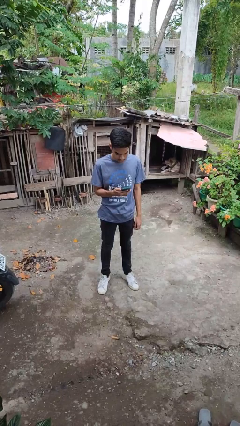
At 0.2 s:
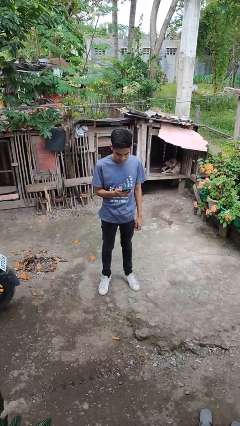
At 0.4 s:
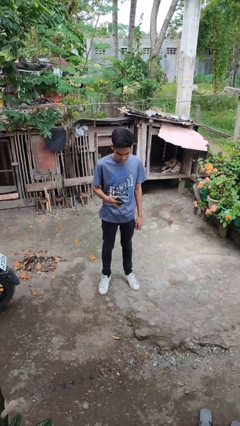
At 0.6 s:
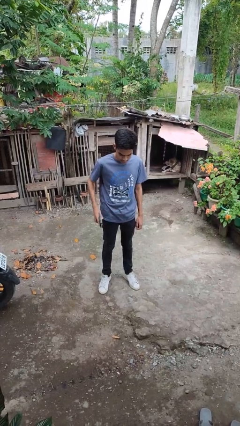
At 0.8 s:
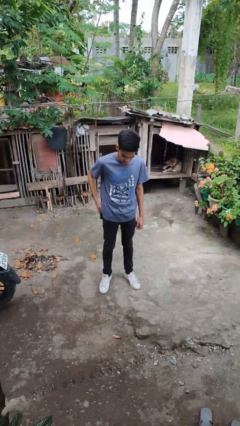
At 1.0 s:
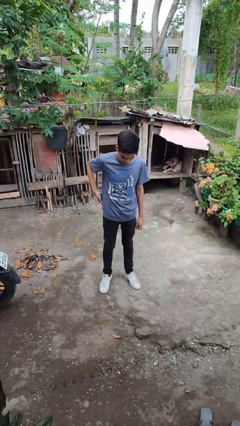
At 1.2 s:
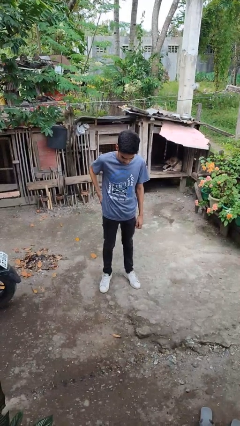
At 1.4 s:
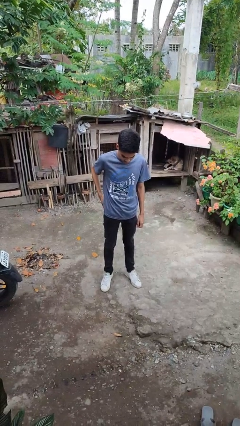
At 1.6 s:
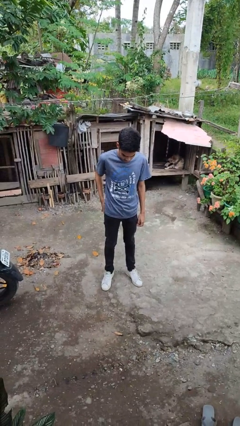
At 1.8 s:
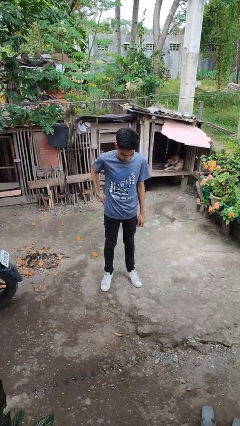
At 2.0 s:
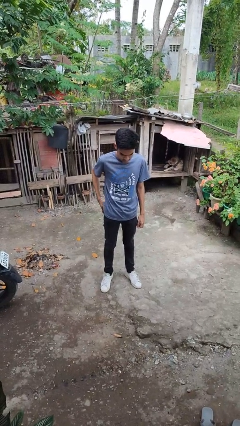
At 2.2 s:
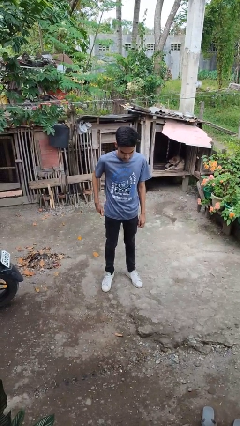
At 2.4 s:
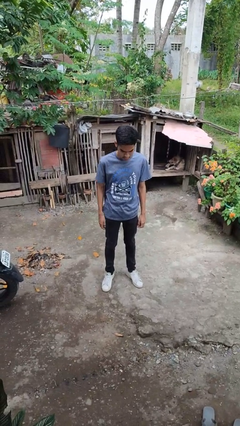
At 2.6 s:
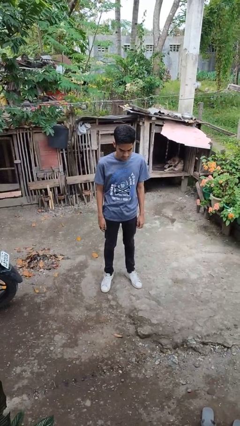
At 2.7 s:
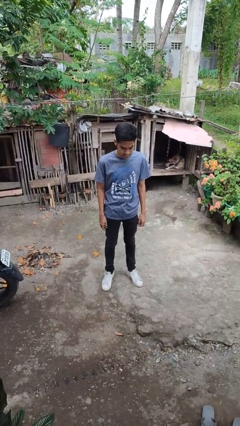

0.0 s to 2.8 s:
person puts phone into pocket

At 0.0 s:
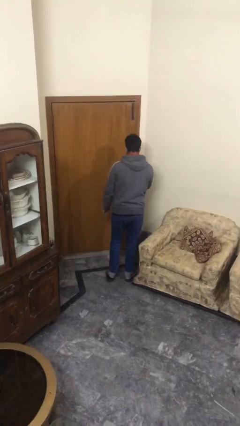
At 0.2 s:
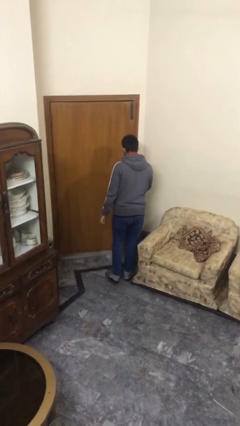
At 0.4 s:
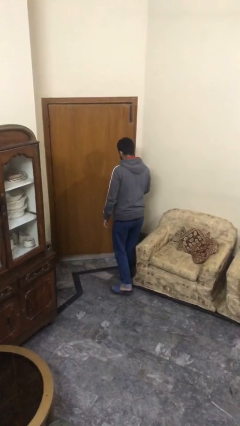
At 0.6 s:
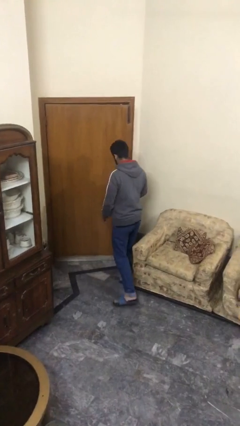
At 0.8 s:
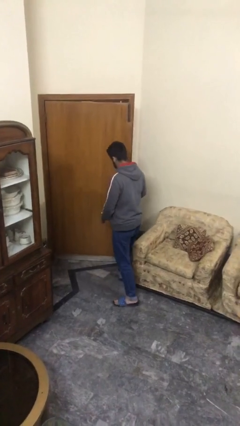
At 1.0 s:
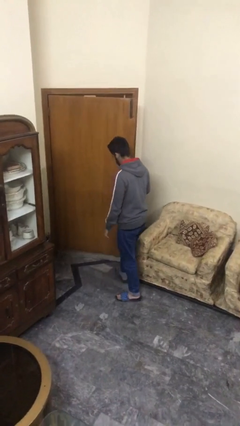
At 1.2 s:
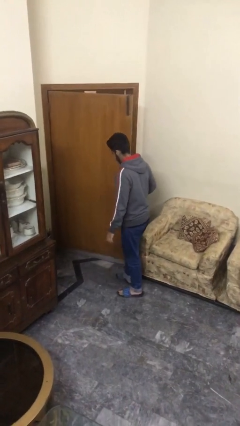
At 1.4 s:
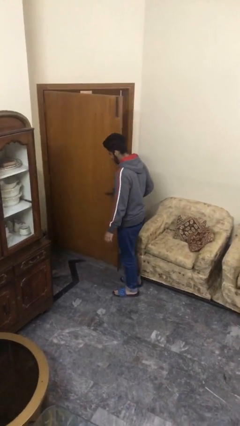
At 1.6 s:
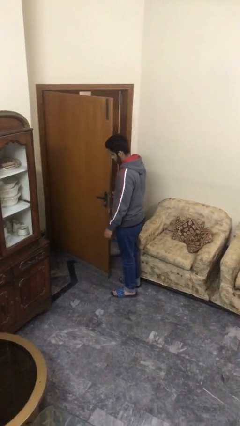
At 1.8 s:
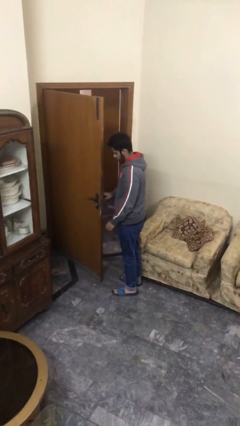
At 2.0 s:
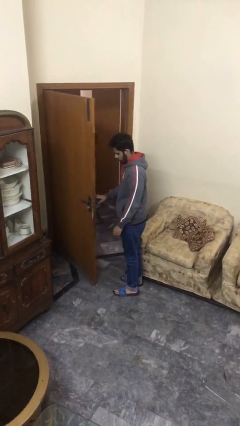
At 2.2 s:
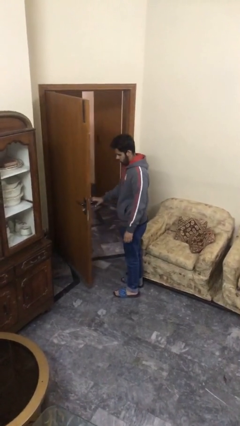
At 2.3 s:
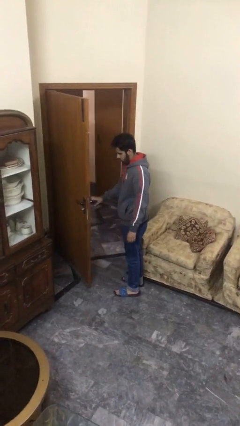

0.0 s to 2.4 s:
person opens facility door

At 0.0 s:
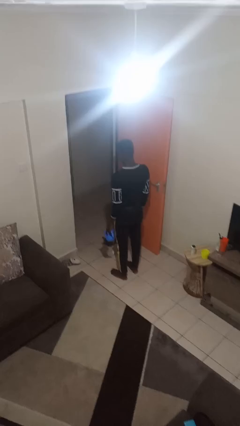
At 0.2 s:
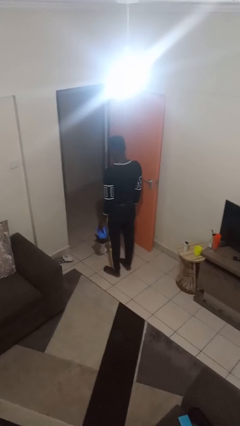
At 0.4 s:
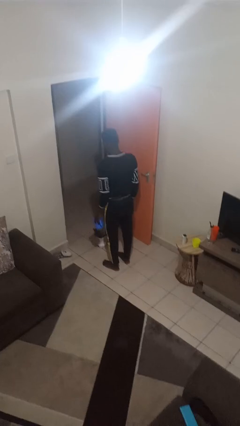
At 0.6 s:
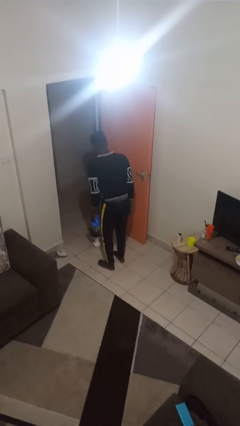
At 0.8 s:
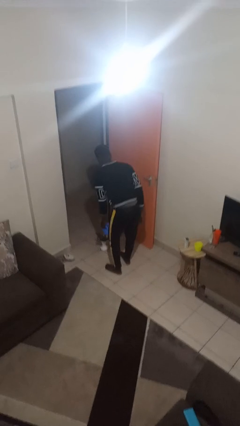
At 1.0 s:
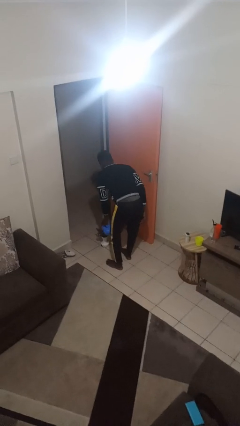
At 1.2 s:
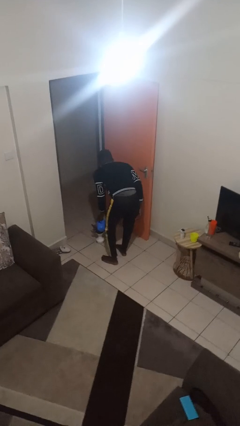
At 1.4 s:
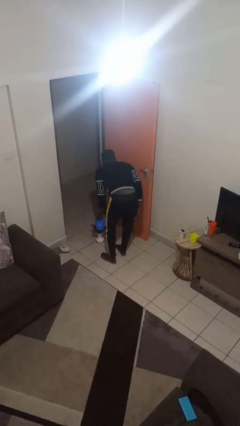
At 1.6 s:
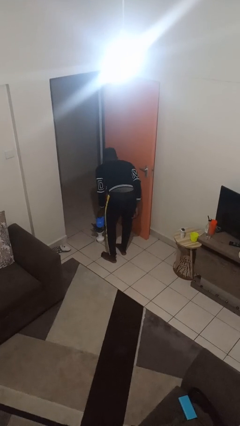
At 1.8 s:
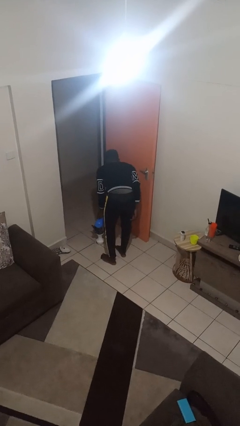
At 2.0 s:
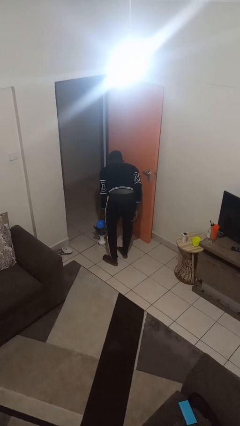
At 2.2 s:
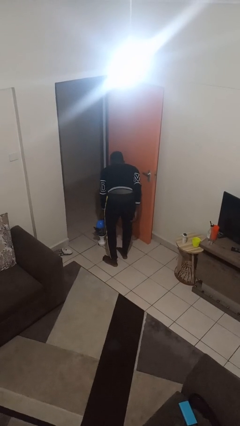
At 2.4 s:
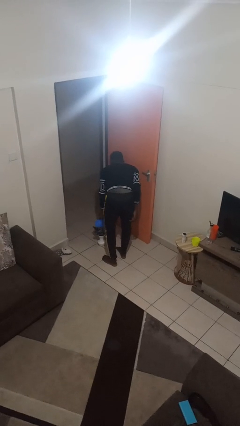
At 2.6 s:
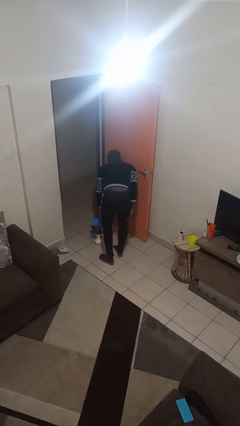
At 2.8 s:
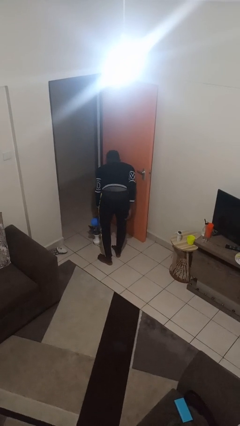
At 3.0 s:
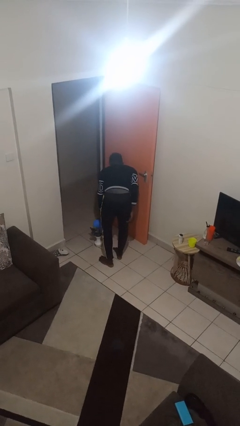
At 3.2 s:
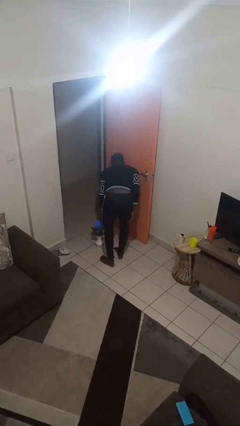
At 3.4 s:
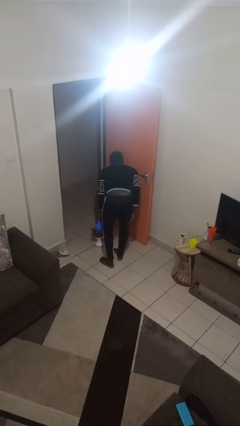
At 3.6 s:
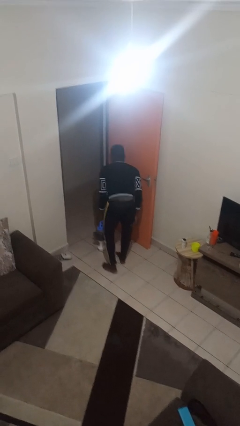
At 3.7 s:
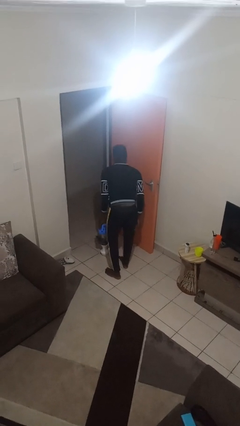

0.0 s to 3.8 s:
person waters houseplant

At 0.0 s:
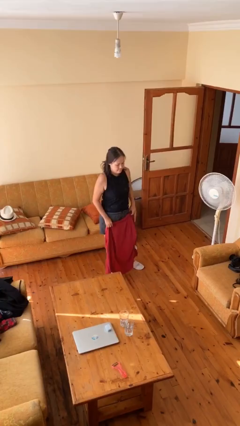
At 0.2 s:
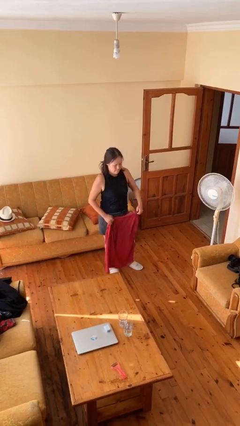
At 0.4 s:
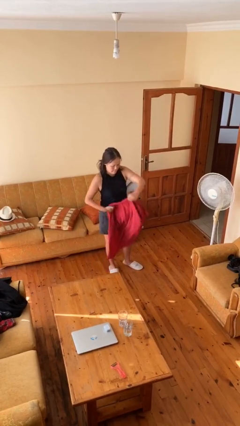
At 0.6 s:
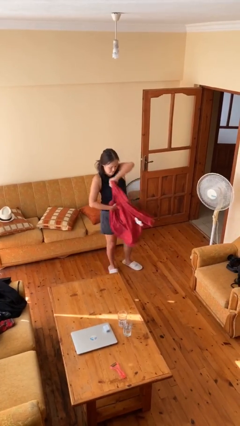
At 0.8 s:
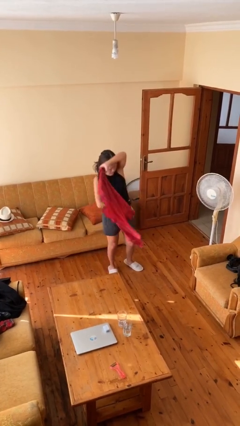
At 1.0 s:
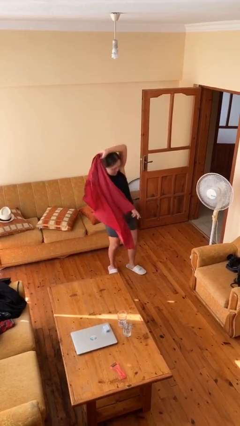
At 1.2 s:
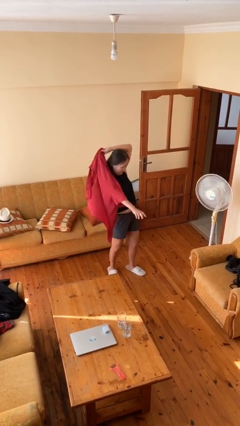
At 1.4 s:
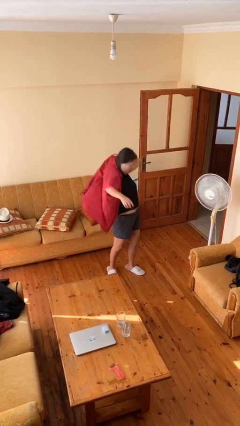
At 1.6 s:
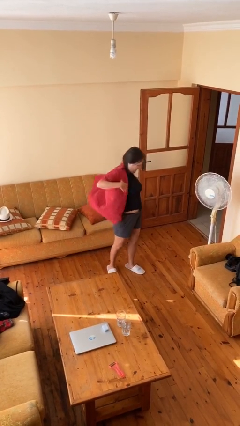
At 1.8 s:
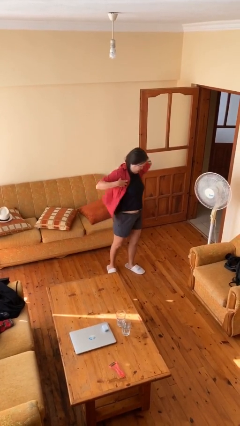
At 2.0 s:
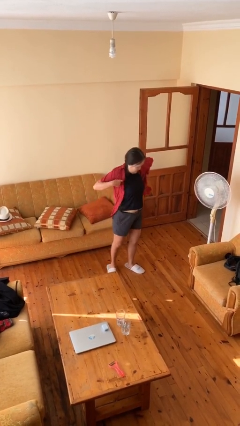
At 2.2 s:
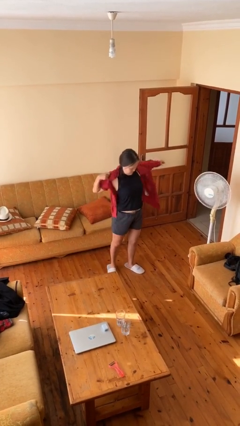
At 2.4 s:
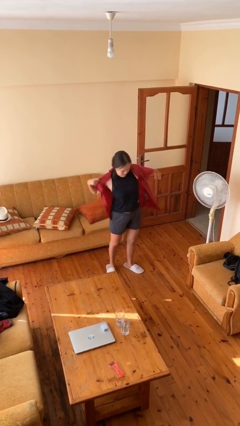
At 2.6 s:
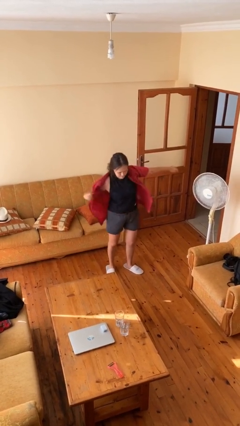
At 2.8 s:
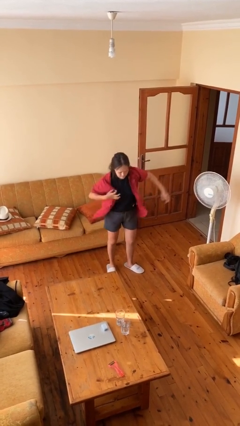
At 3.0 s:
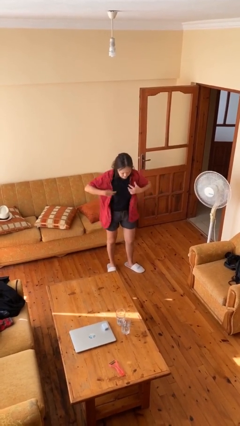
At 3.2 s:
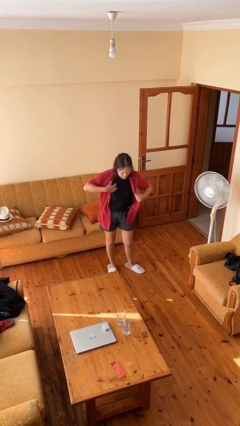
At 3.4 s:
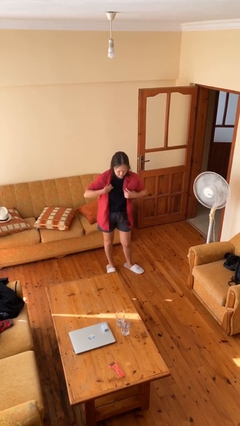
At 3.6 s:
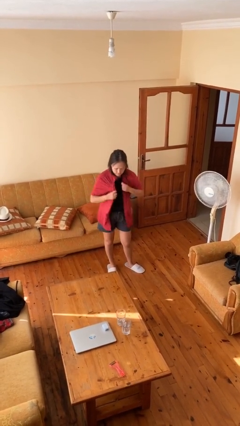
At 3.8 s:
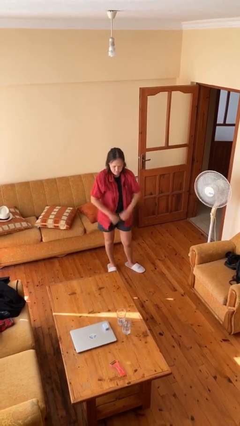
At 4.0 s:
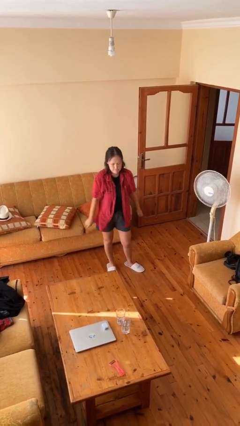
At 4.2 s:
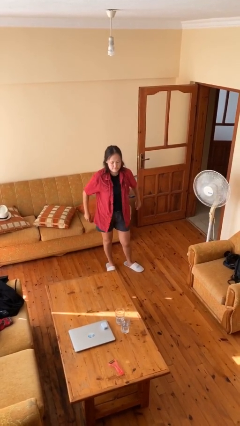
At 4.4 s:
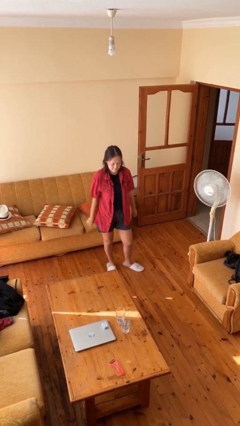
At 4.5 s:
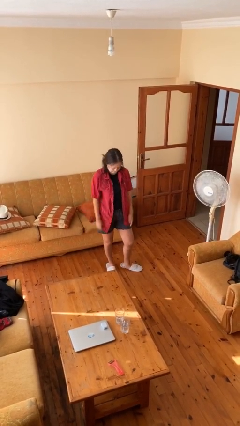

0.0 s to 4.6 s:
person puts on shirt

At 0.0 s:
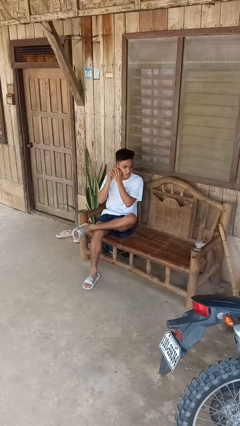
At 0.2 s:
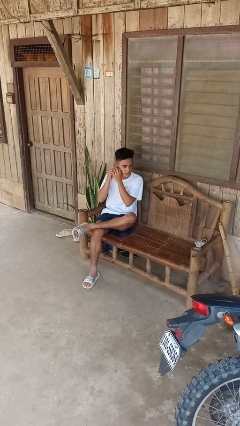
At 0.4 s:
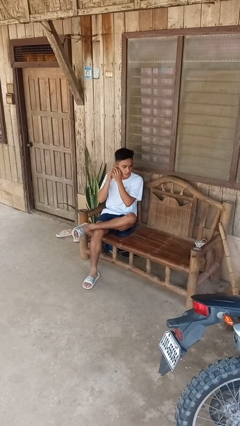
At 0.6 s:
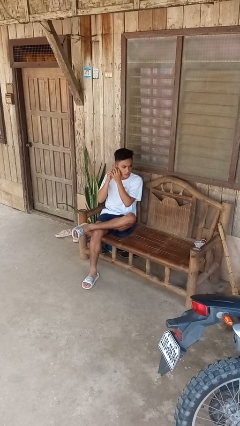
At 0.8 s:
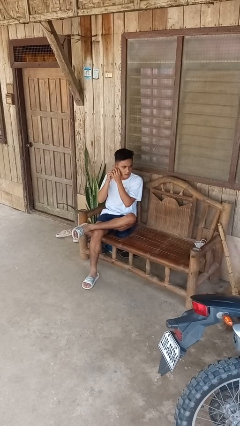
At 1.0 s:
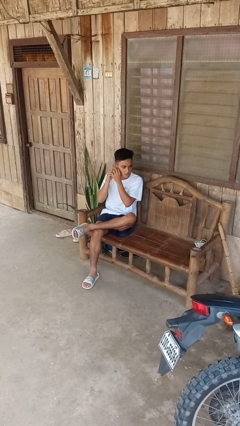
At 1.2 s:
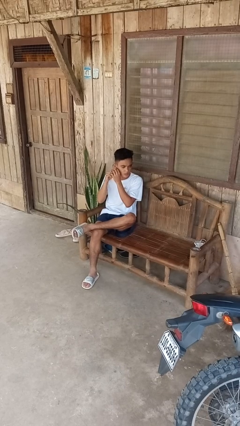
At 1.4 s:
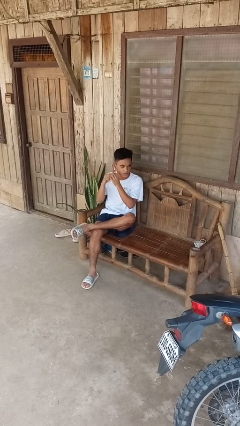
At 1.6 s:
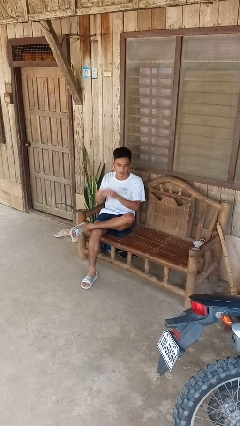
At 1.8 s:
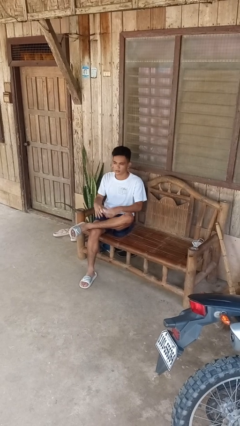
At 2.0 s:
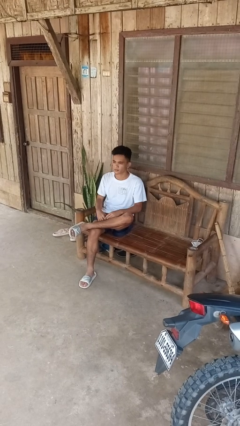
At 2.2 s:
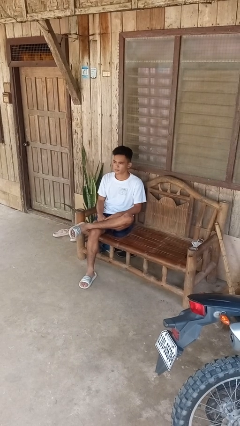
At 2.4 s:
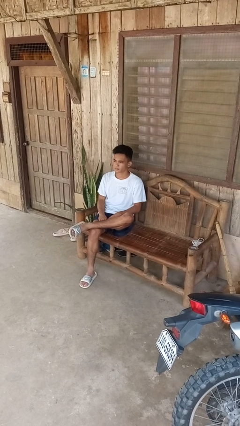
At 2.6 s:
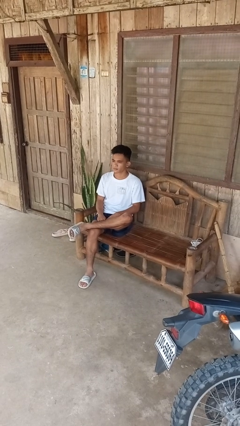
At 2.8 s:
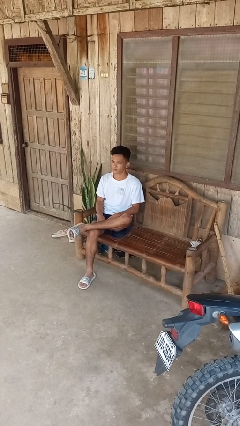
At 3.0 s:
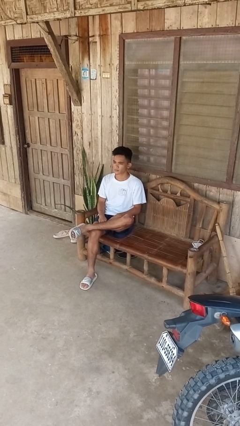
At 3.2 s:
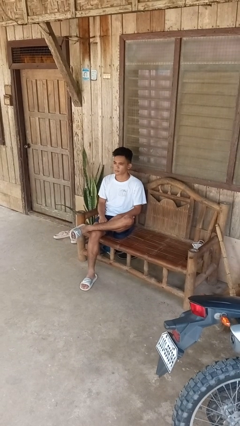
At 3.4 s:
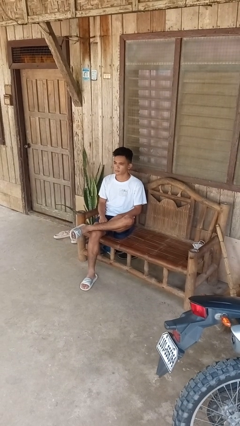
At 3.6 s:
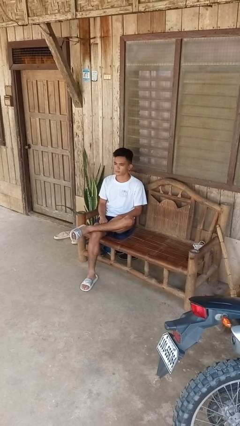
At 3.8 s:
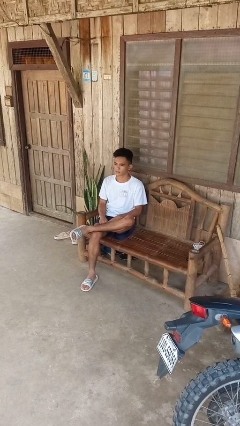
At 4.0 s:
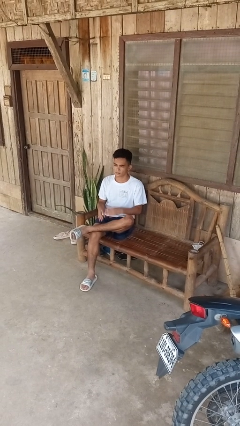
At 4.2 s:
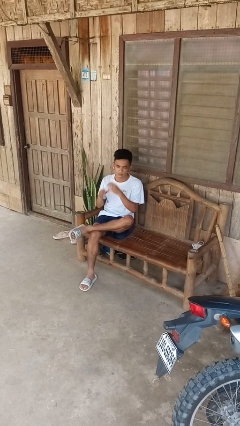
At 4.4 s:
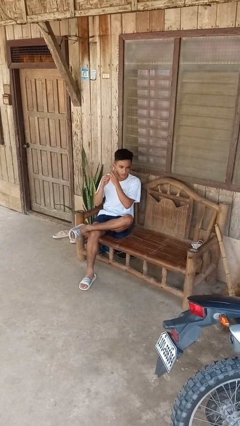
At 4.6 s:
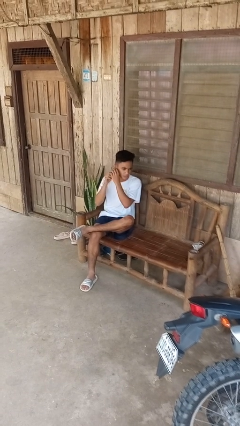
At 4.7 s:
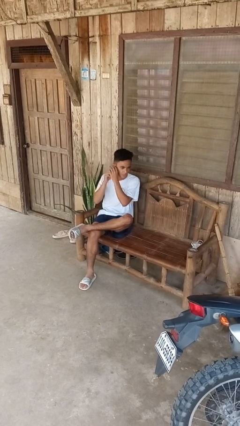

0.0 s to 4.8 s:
person puts on earrings
